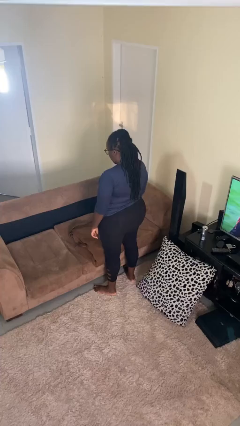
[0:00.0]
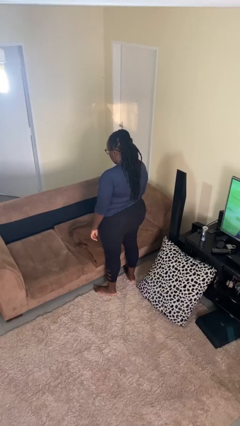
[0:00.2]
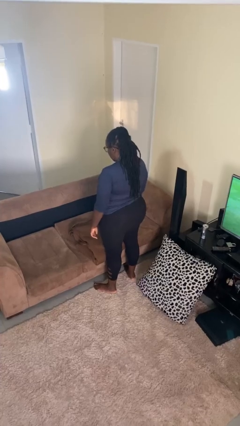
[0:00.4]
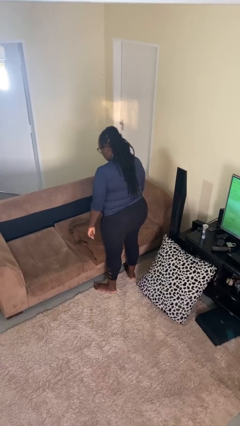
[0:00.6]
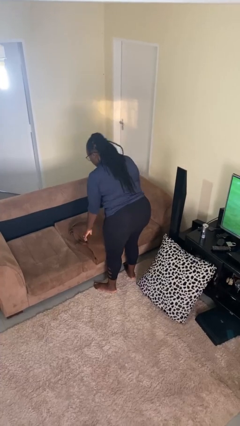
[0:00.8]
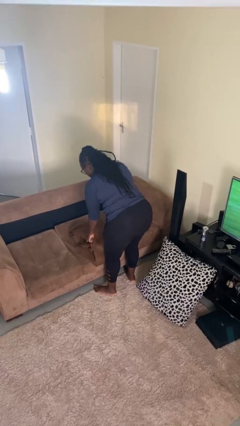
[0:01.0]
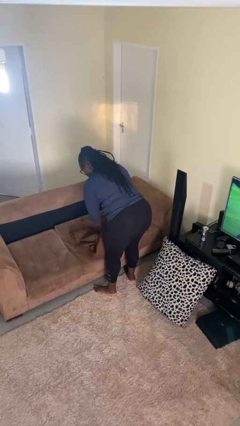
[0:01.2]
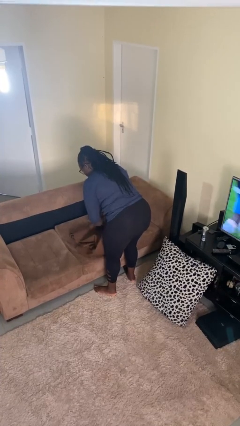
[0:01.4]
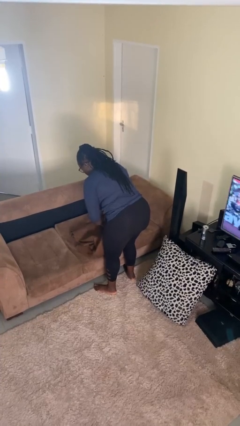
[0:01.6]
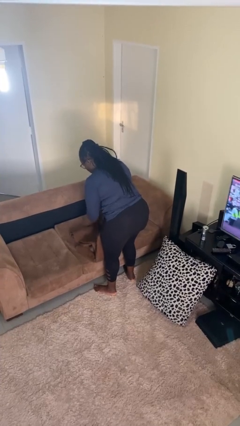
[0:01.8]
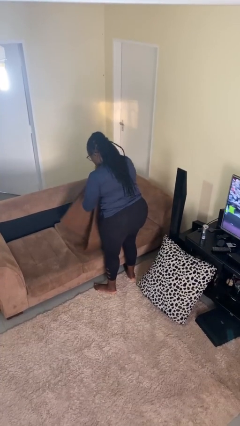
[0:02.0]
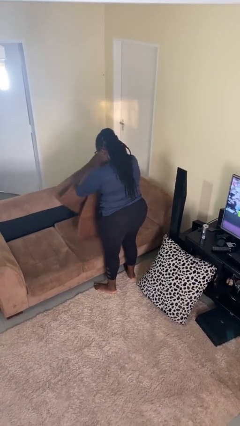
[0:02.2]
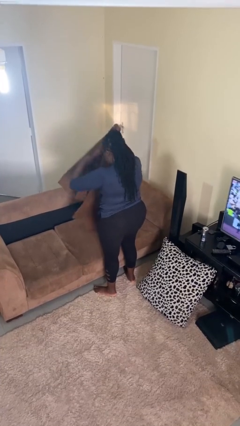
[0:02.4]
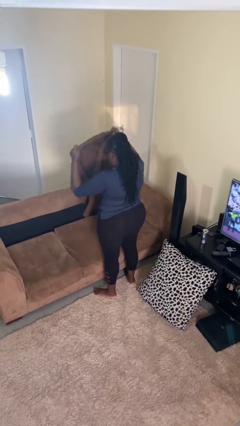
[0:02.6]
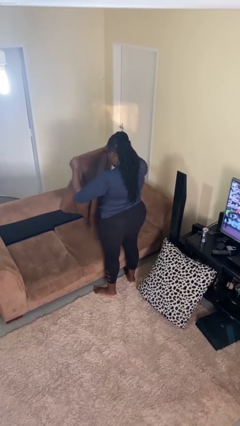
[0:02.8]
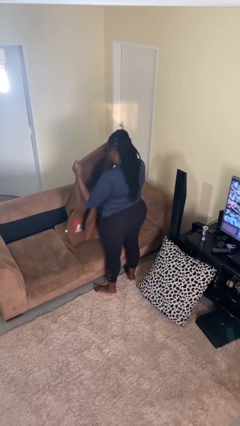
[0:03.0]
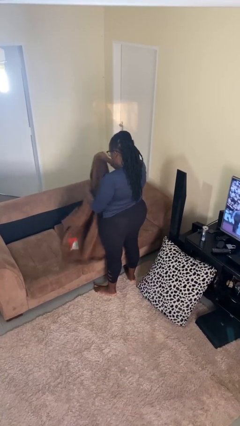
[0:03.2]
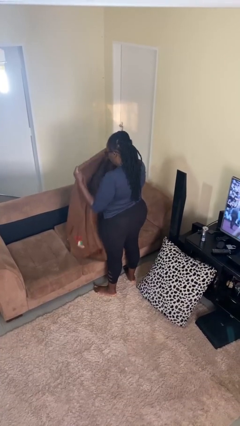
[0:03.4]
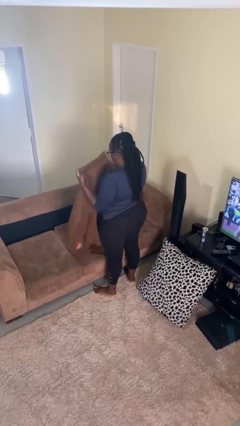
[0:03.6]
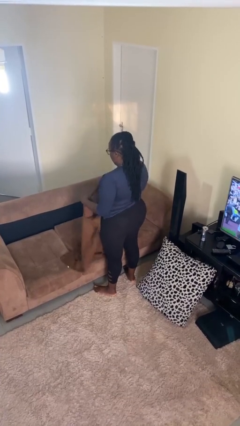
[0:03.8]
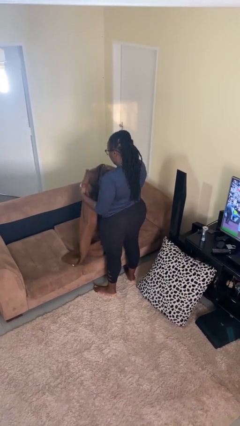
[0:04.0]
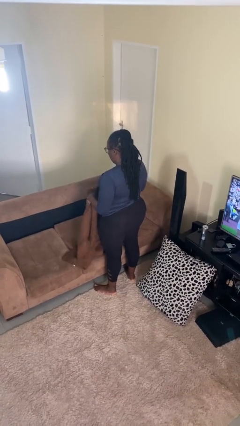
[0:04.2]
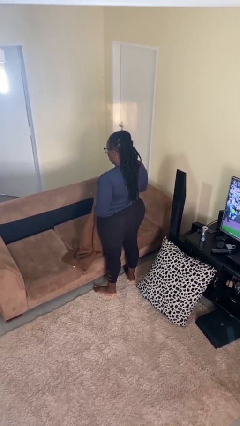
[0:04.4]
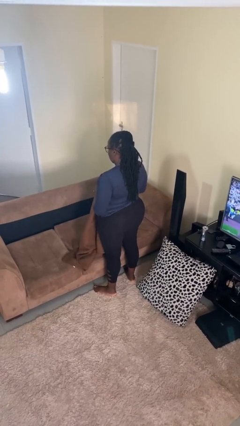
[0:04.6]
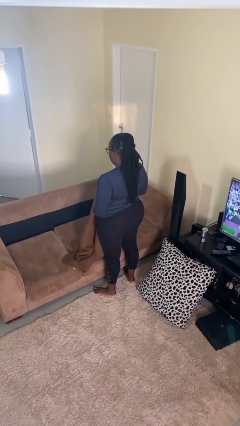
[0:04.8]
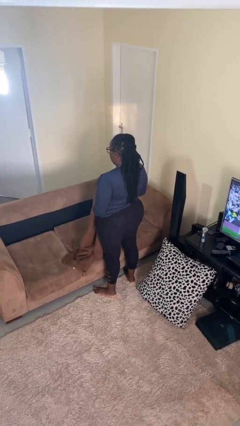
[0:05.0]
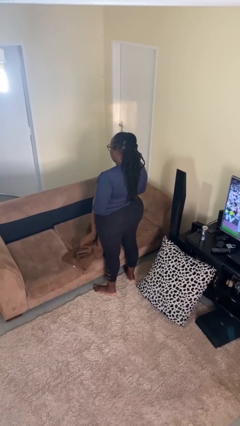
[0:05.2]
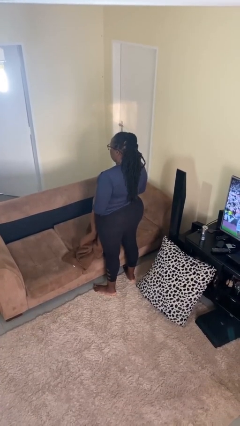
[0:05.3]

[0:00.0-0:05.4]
person unfolds blanket

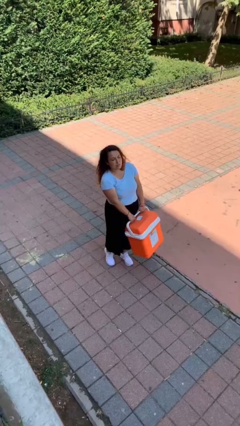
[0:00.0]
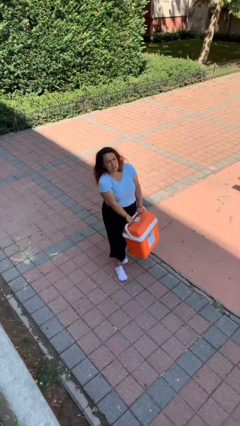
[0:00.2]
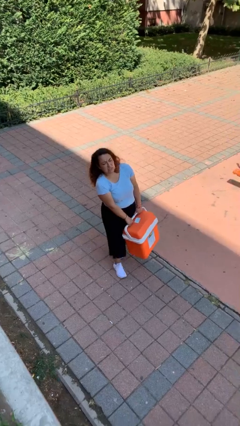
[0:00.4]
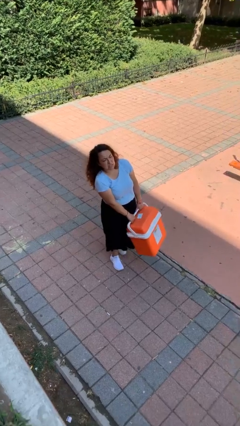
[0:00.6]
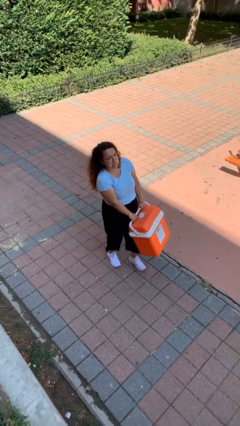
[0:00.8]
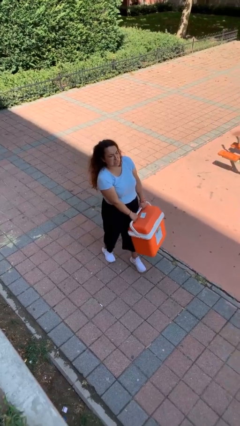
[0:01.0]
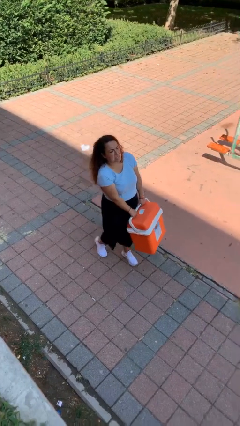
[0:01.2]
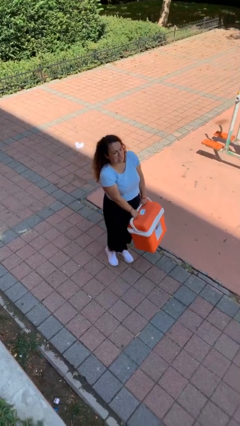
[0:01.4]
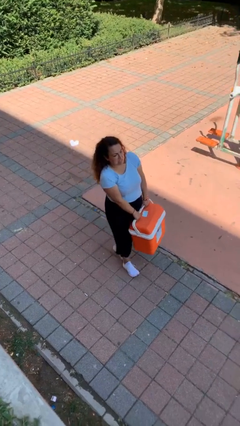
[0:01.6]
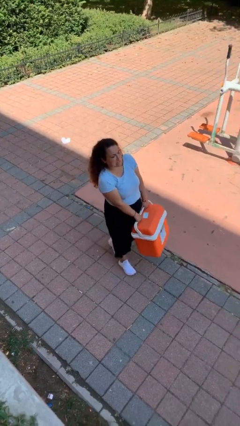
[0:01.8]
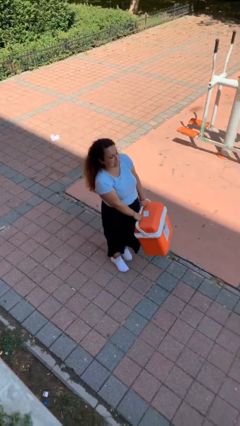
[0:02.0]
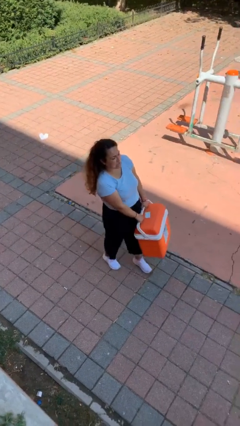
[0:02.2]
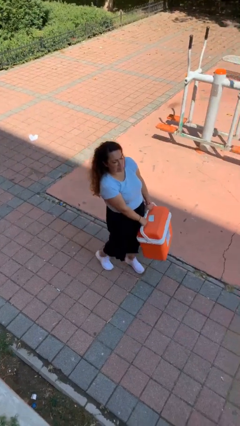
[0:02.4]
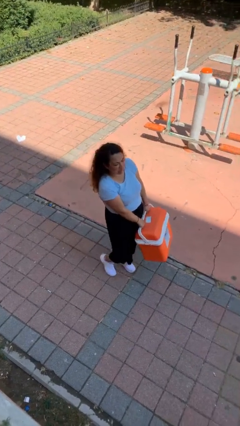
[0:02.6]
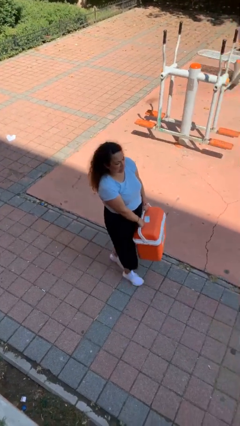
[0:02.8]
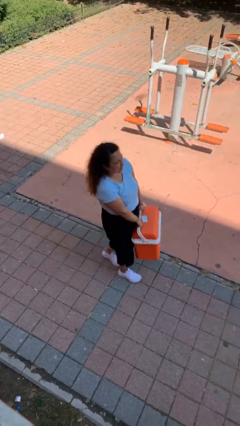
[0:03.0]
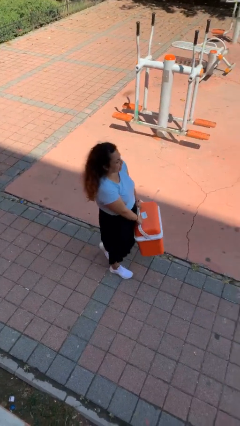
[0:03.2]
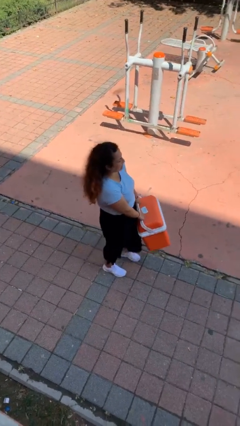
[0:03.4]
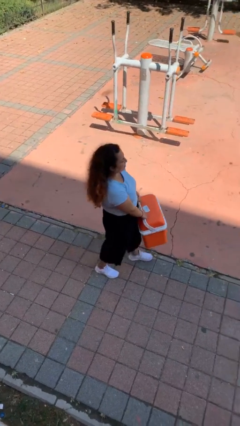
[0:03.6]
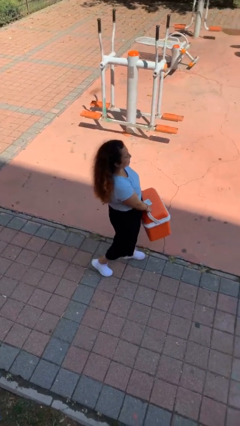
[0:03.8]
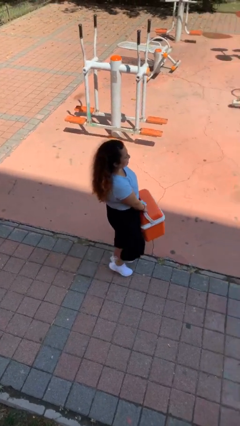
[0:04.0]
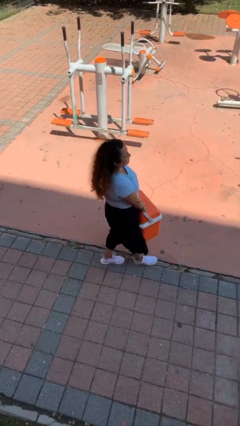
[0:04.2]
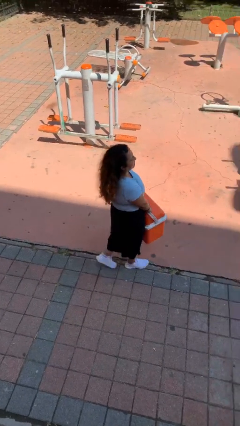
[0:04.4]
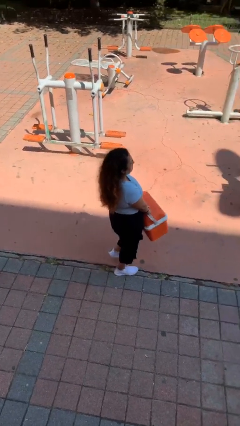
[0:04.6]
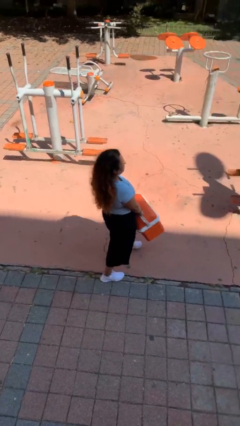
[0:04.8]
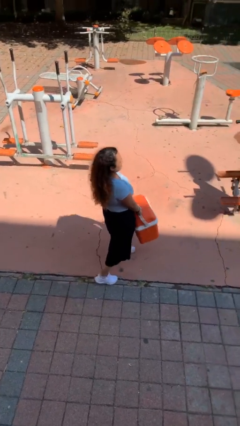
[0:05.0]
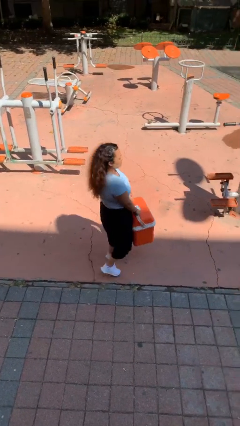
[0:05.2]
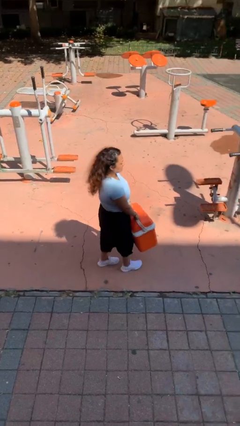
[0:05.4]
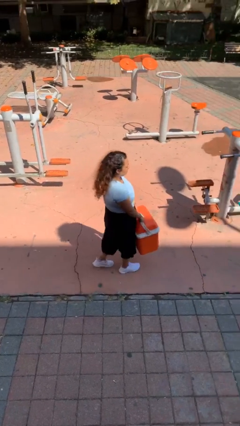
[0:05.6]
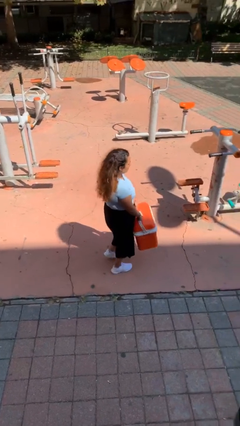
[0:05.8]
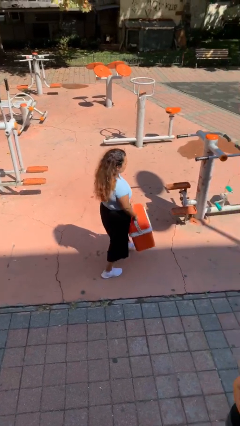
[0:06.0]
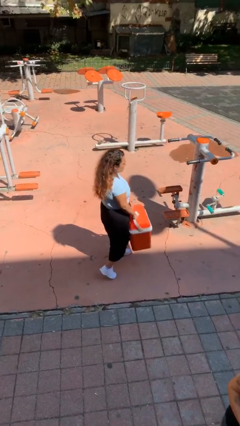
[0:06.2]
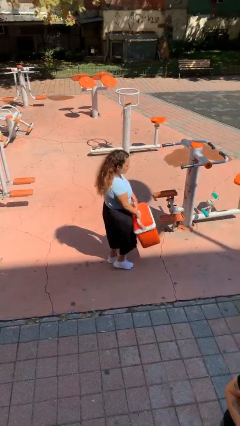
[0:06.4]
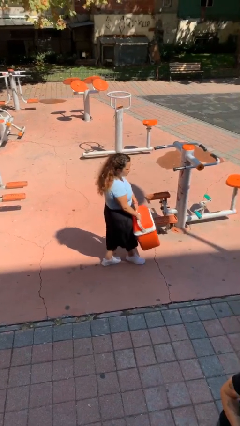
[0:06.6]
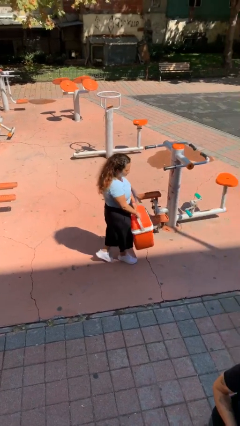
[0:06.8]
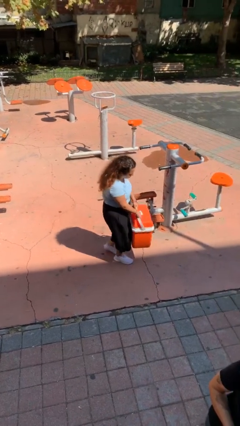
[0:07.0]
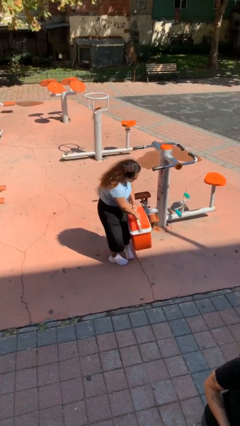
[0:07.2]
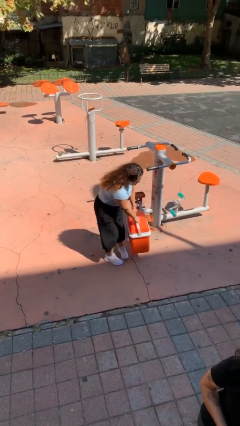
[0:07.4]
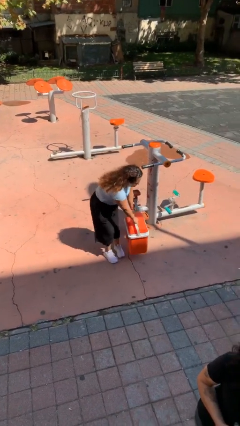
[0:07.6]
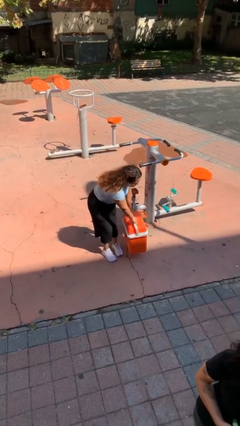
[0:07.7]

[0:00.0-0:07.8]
person carries heavy object

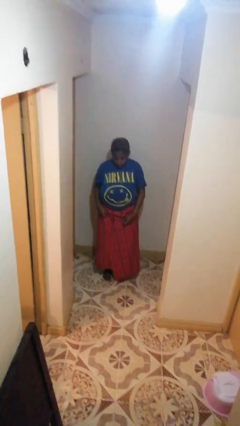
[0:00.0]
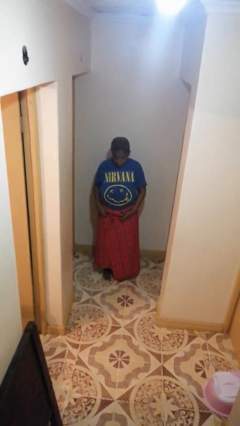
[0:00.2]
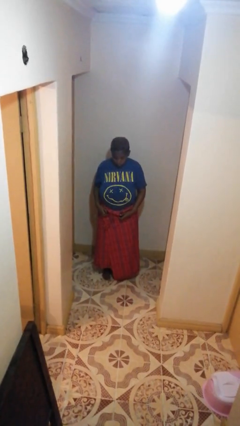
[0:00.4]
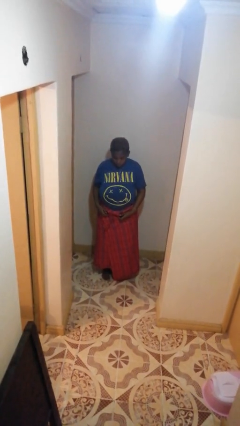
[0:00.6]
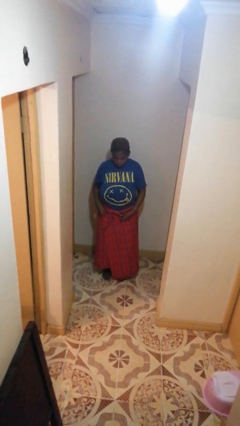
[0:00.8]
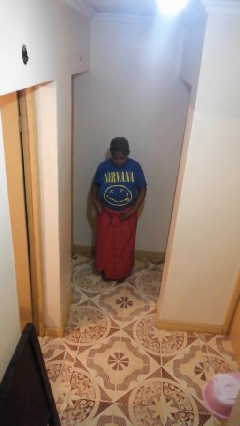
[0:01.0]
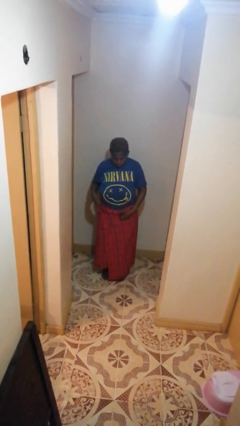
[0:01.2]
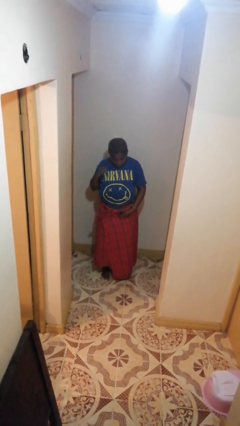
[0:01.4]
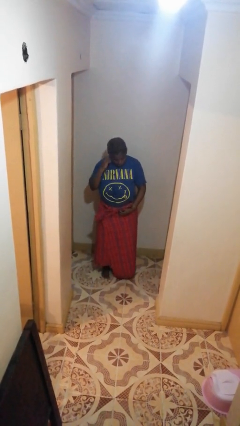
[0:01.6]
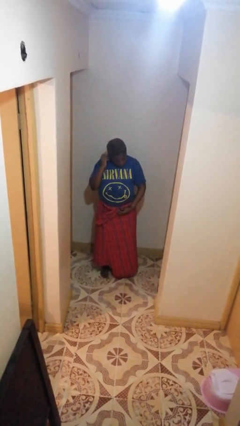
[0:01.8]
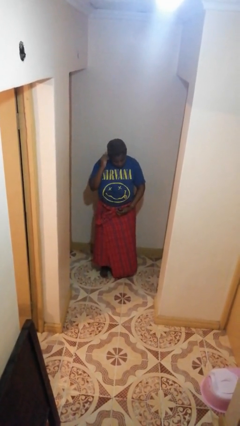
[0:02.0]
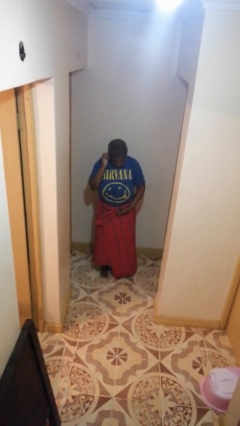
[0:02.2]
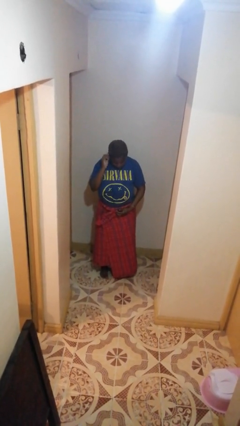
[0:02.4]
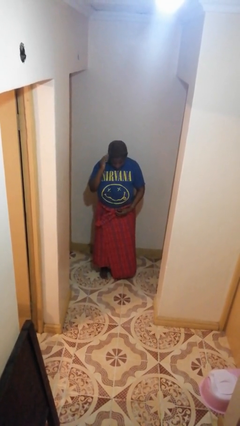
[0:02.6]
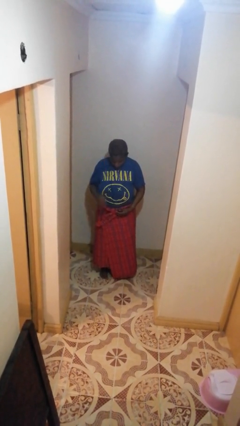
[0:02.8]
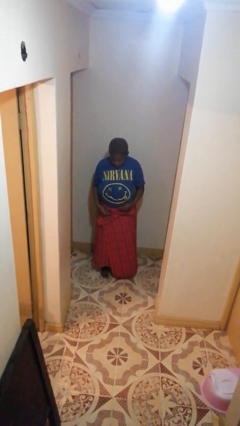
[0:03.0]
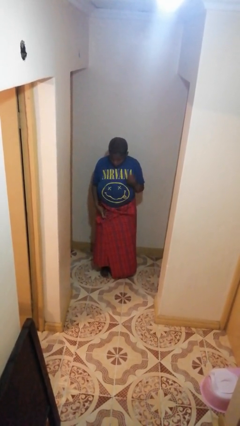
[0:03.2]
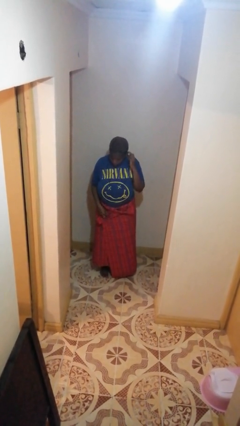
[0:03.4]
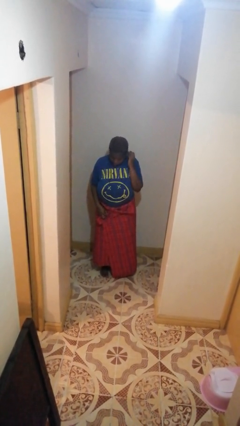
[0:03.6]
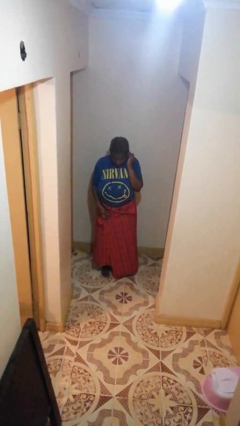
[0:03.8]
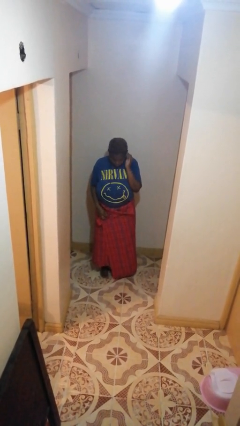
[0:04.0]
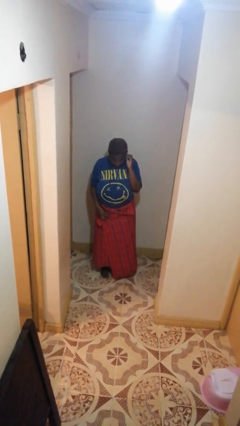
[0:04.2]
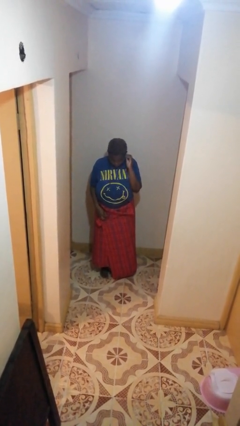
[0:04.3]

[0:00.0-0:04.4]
person puts on headphones

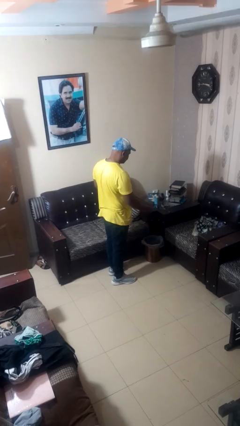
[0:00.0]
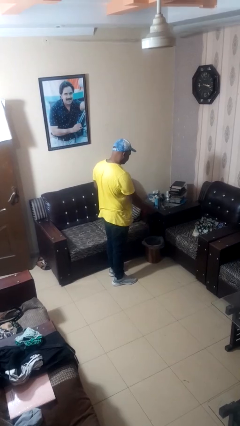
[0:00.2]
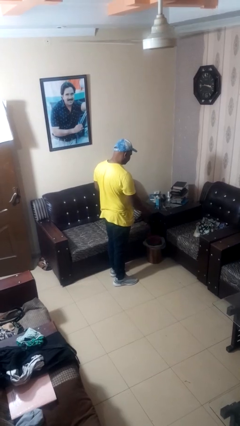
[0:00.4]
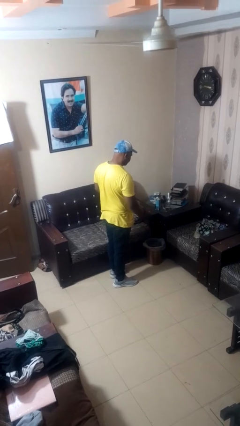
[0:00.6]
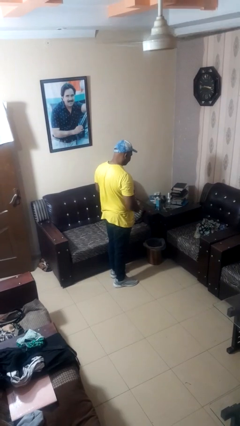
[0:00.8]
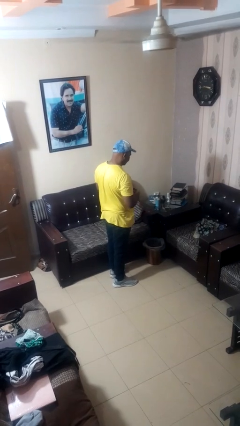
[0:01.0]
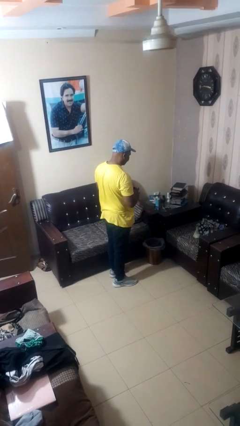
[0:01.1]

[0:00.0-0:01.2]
person discards trash
